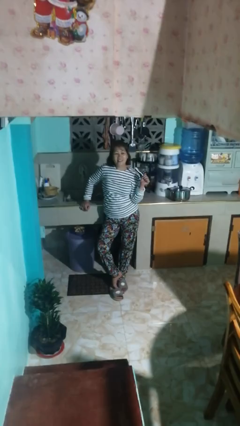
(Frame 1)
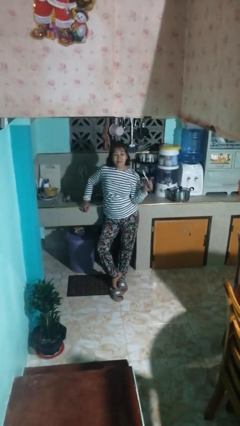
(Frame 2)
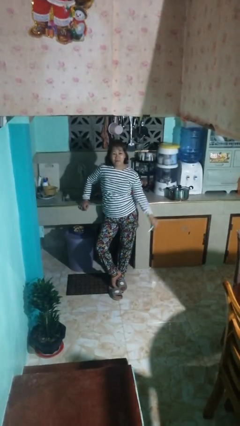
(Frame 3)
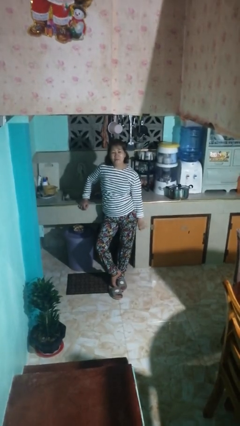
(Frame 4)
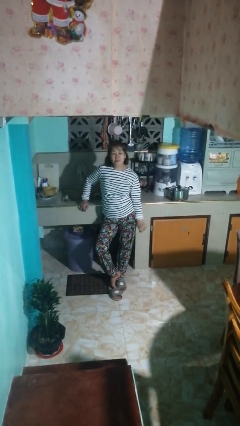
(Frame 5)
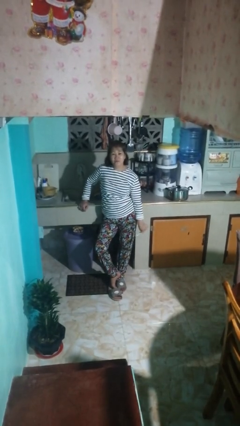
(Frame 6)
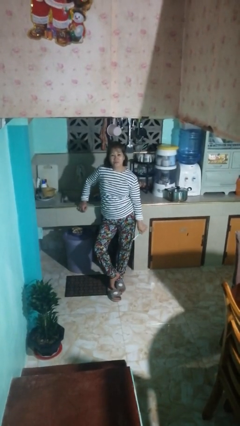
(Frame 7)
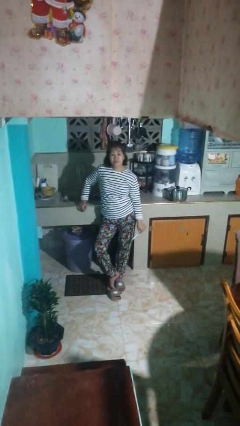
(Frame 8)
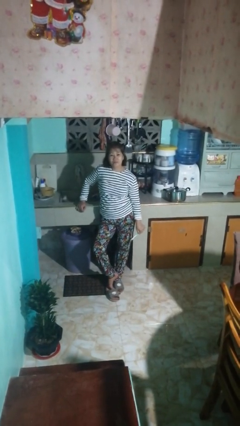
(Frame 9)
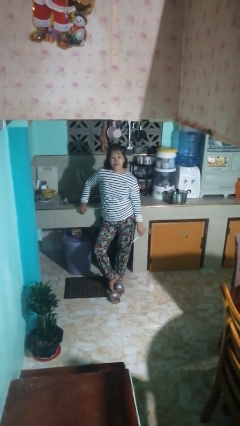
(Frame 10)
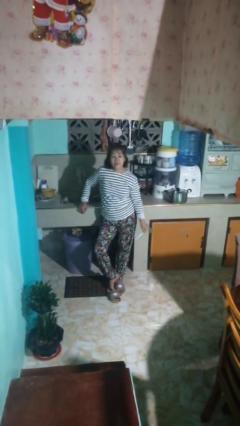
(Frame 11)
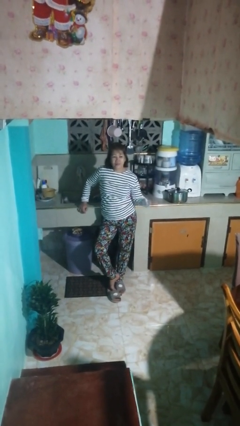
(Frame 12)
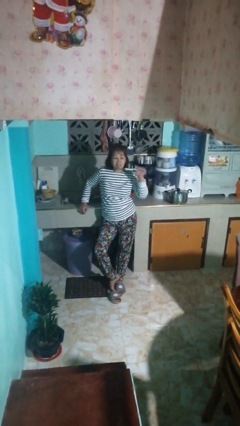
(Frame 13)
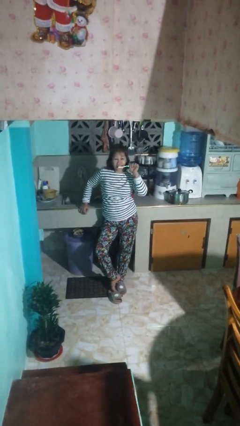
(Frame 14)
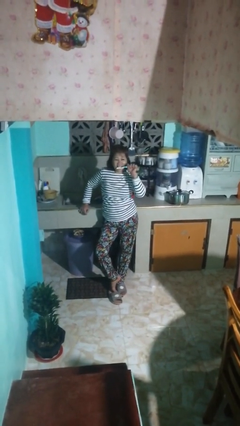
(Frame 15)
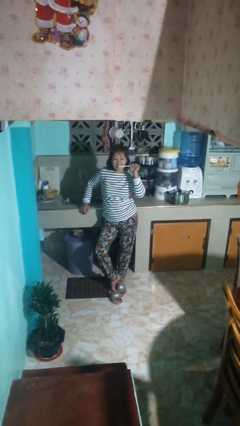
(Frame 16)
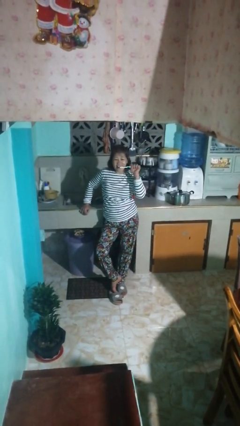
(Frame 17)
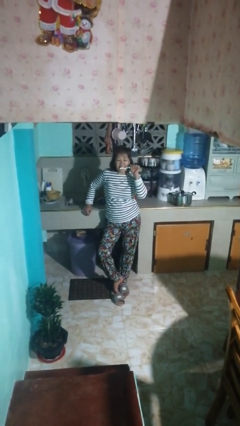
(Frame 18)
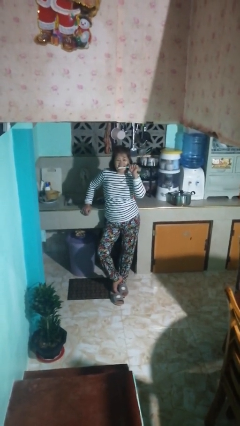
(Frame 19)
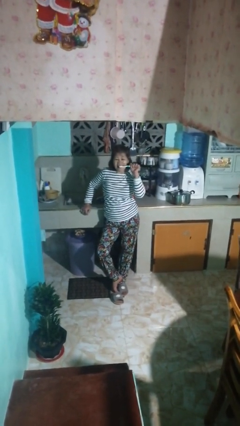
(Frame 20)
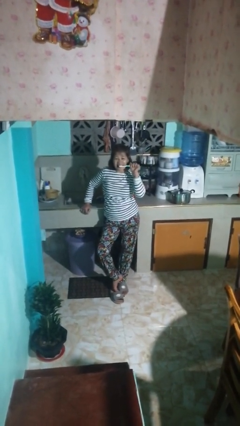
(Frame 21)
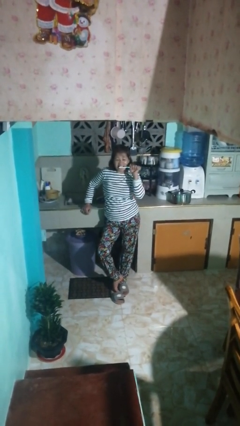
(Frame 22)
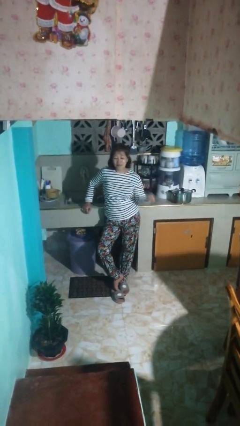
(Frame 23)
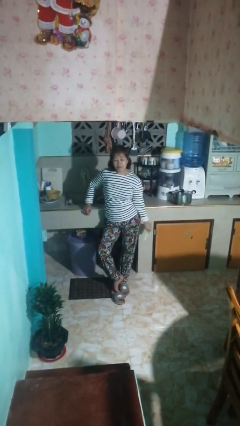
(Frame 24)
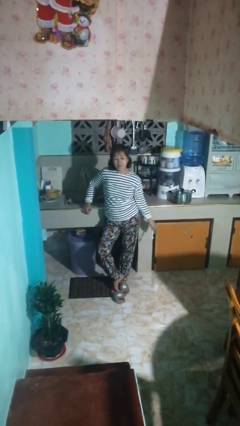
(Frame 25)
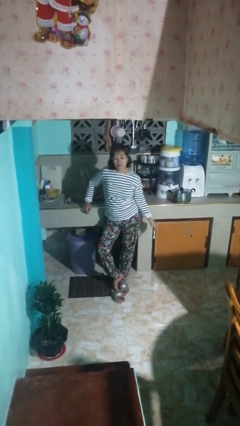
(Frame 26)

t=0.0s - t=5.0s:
person brushes teeth

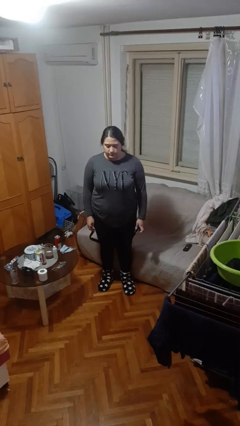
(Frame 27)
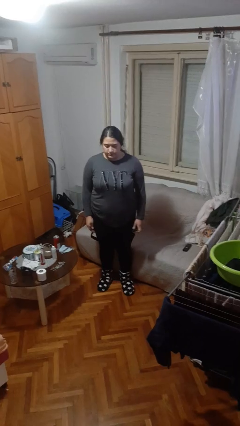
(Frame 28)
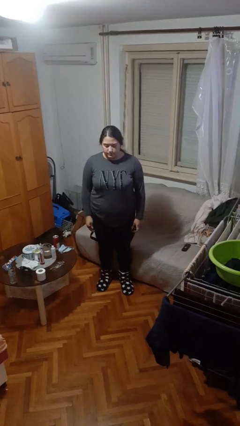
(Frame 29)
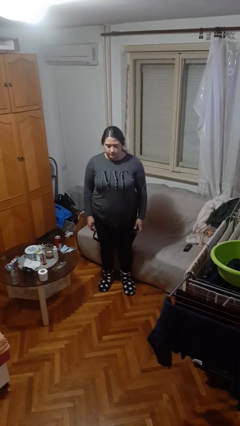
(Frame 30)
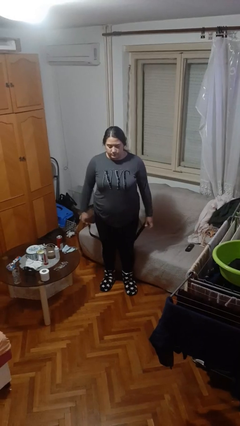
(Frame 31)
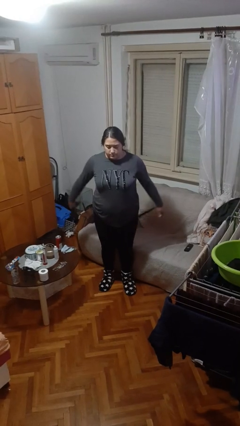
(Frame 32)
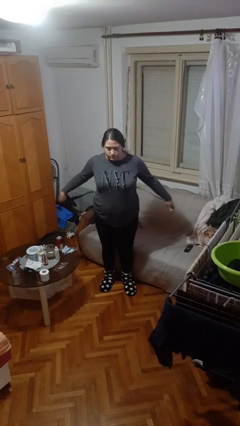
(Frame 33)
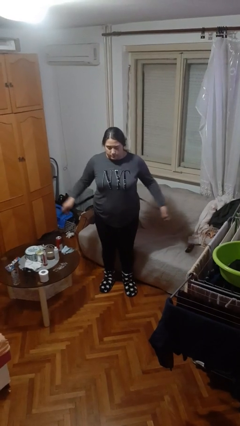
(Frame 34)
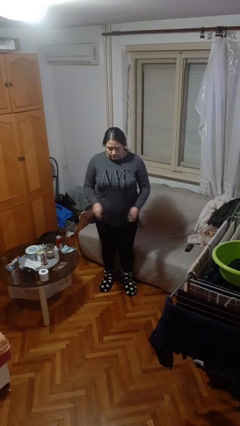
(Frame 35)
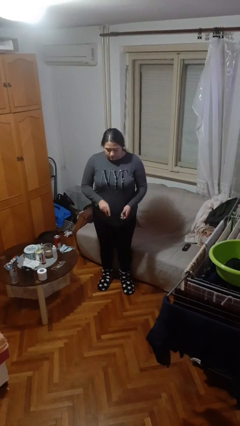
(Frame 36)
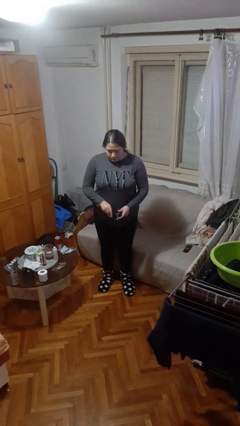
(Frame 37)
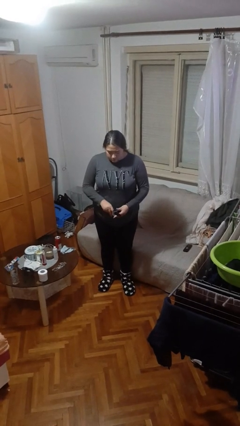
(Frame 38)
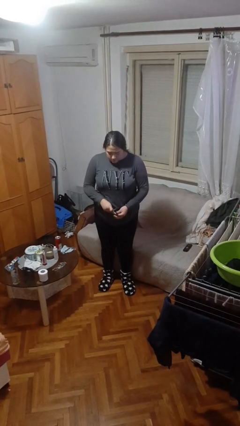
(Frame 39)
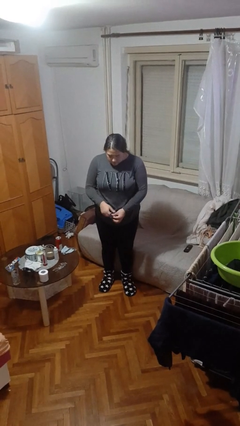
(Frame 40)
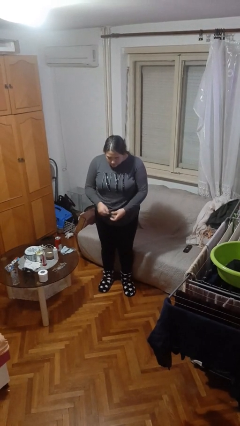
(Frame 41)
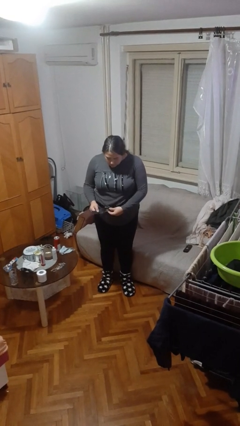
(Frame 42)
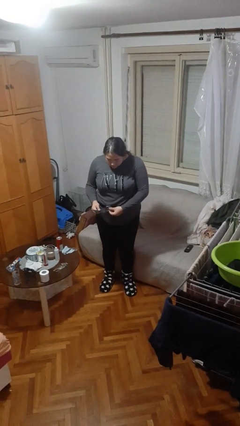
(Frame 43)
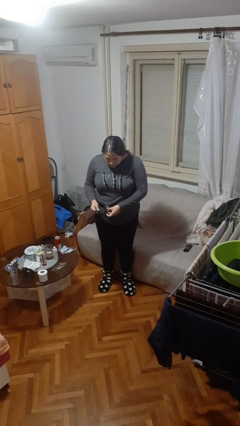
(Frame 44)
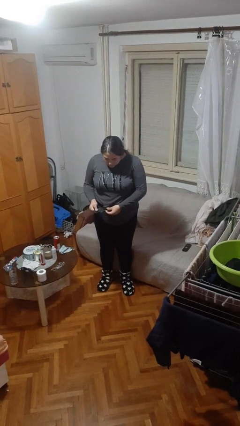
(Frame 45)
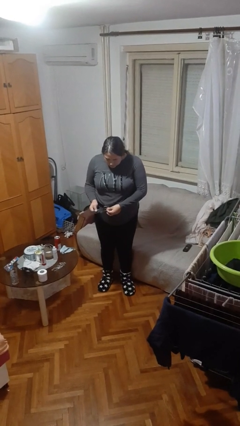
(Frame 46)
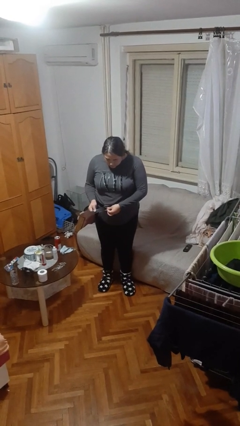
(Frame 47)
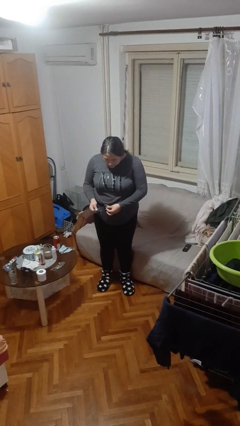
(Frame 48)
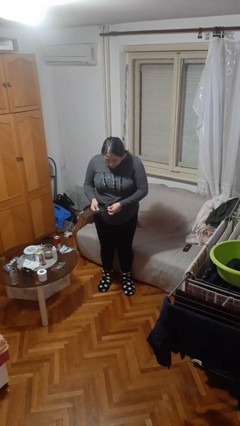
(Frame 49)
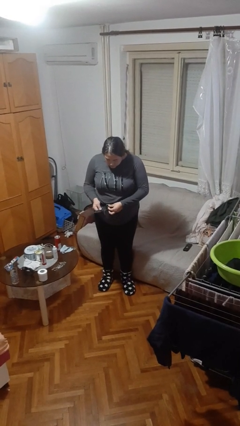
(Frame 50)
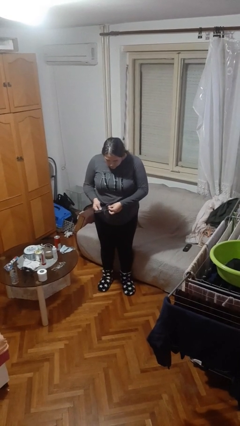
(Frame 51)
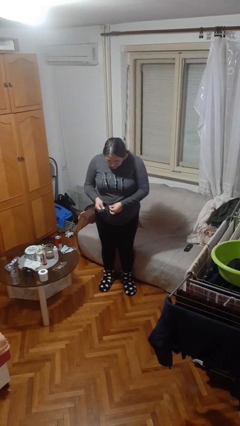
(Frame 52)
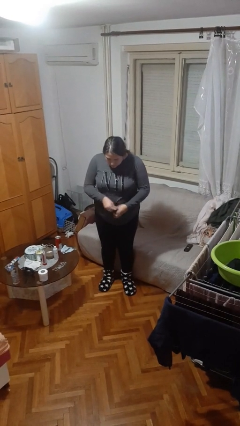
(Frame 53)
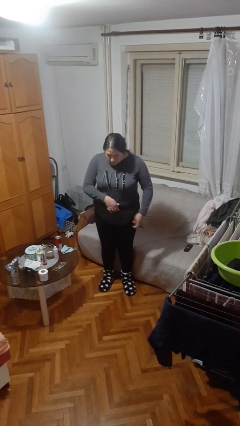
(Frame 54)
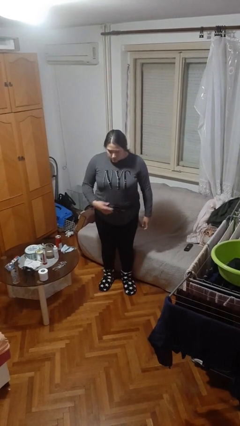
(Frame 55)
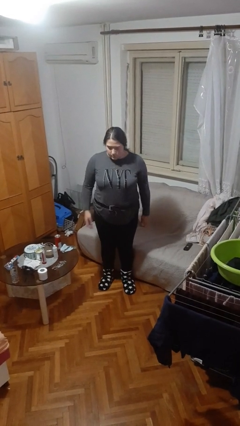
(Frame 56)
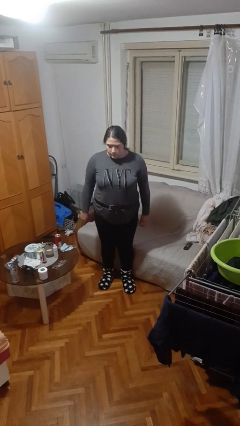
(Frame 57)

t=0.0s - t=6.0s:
person puts on belt

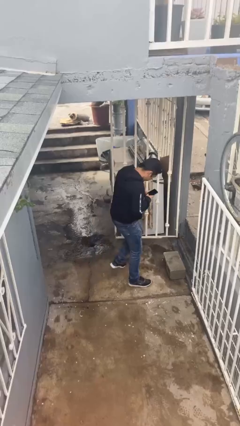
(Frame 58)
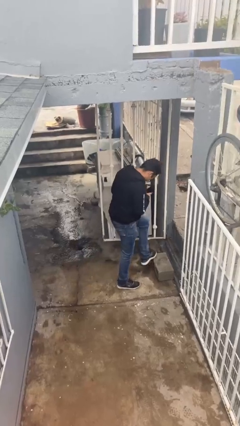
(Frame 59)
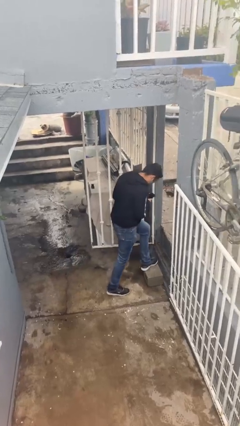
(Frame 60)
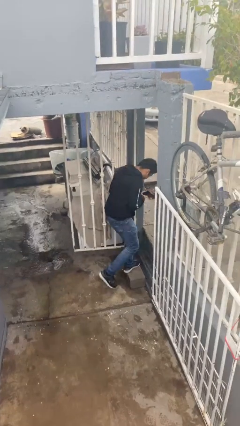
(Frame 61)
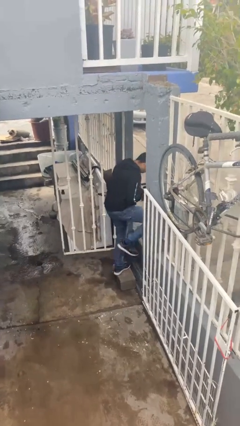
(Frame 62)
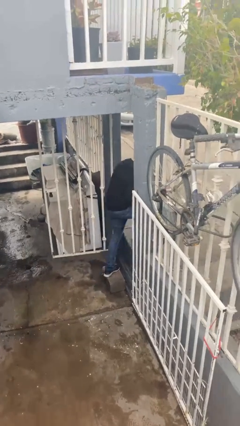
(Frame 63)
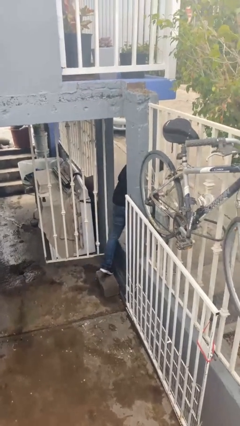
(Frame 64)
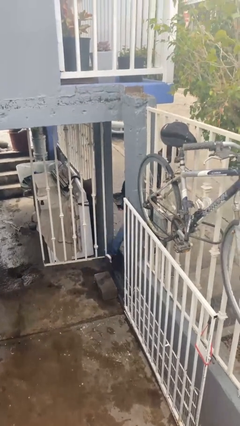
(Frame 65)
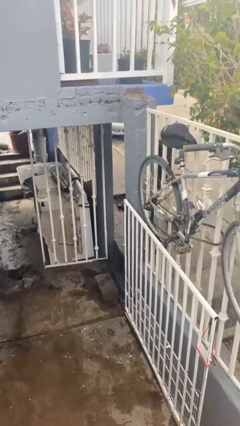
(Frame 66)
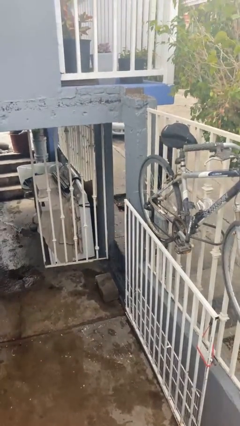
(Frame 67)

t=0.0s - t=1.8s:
person exits scene through structure

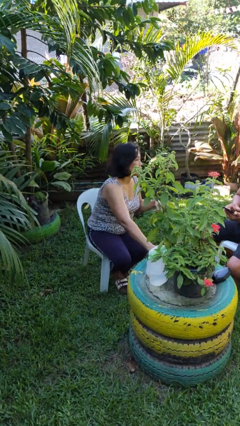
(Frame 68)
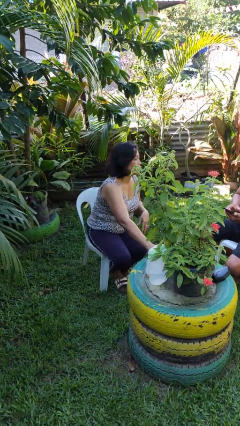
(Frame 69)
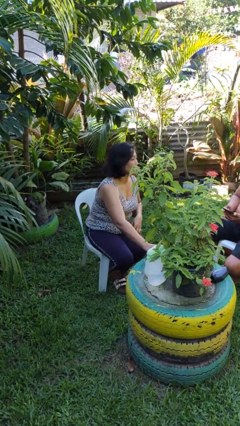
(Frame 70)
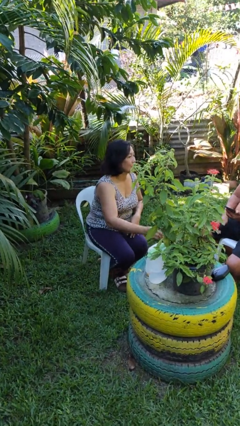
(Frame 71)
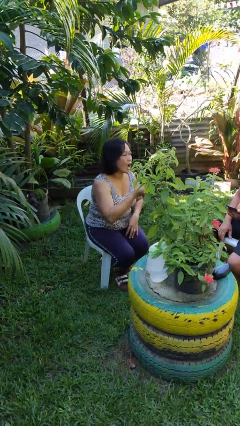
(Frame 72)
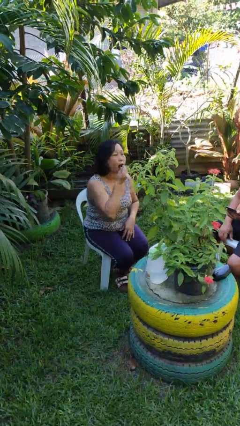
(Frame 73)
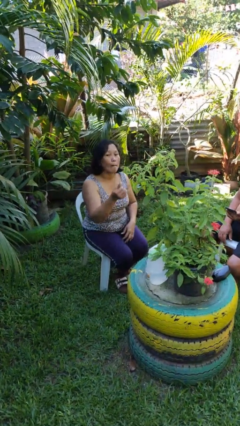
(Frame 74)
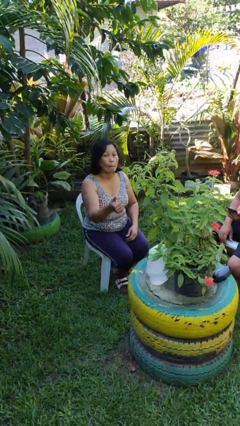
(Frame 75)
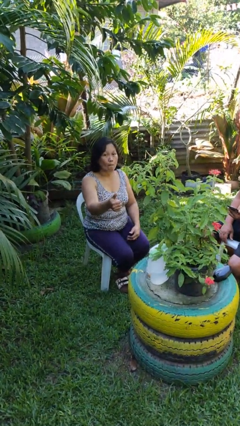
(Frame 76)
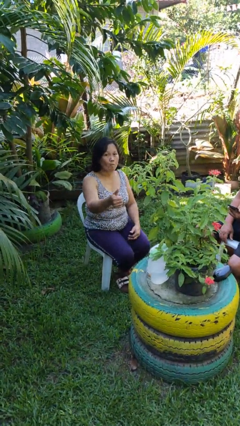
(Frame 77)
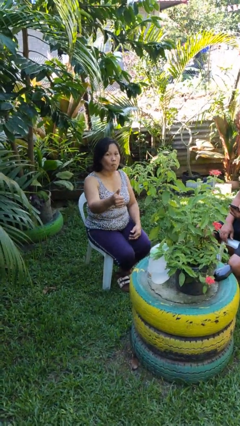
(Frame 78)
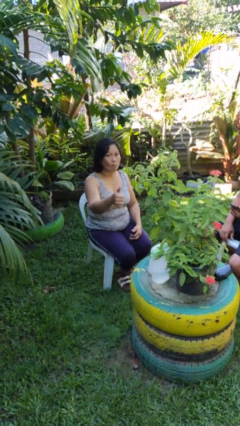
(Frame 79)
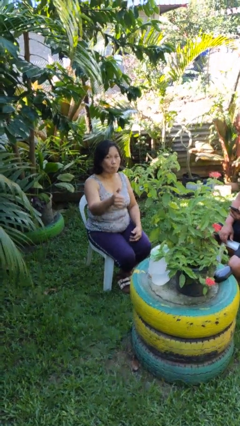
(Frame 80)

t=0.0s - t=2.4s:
person gestures thumbs up

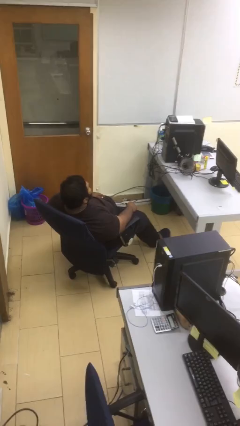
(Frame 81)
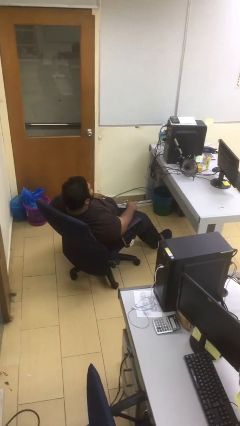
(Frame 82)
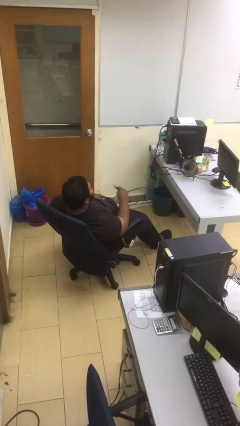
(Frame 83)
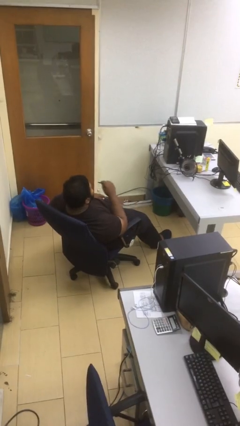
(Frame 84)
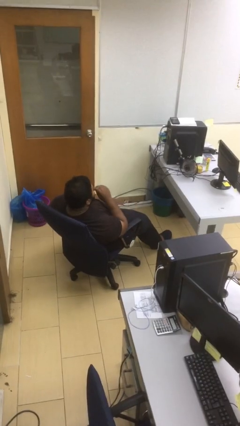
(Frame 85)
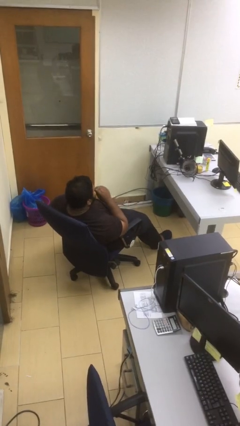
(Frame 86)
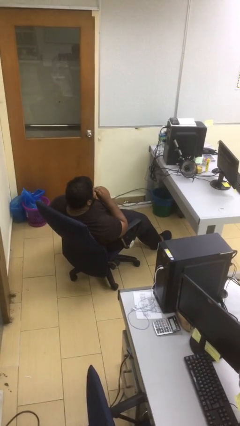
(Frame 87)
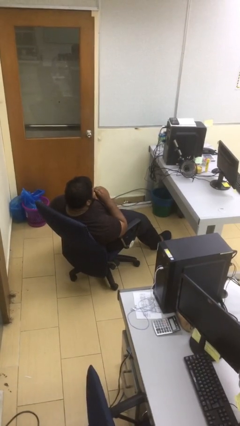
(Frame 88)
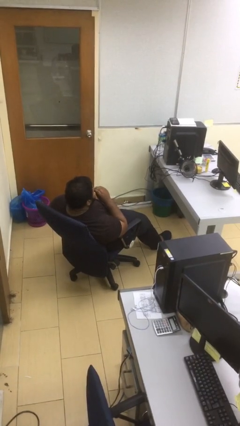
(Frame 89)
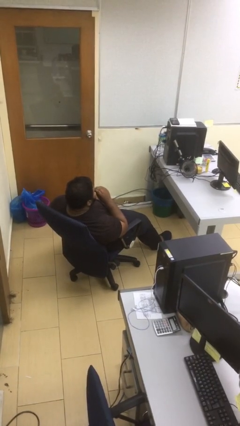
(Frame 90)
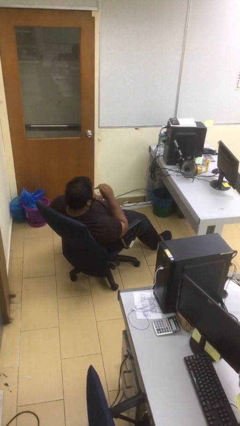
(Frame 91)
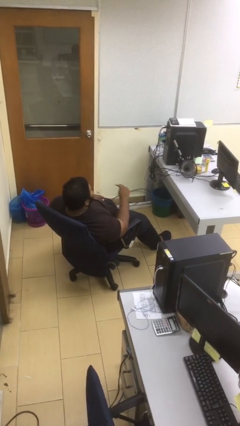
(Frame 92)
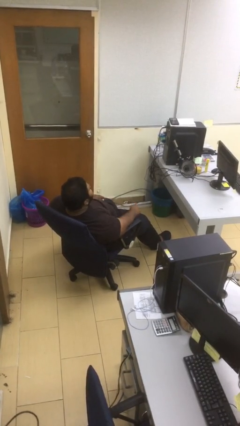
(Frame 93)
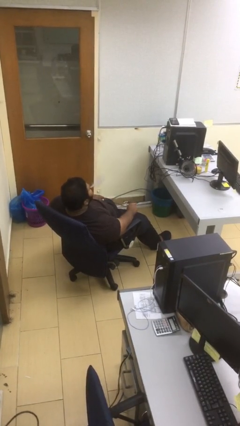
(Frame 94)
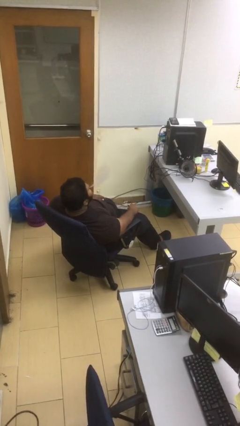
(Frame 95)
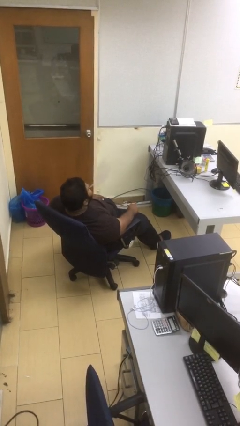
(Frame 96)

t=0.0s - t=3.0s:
person vapes
